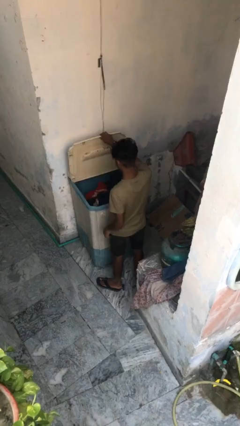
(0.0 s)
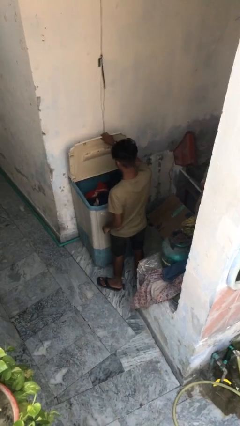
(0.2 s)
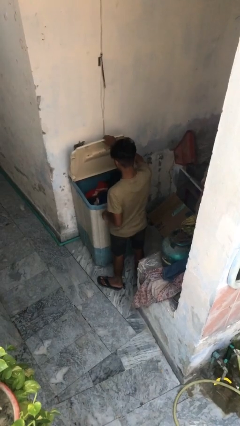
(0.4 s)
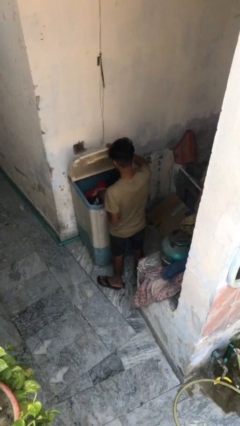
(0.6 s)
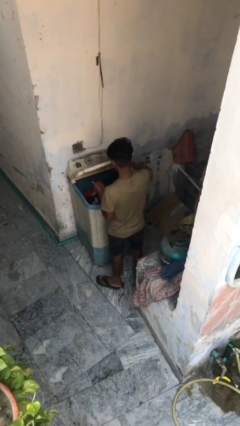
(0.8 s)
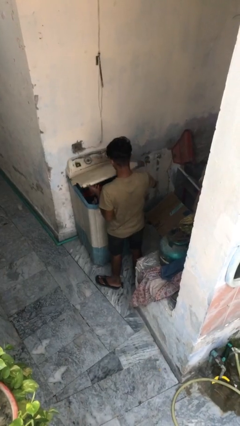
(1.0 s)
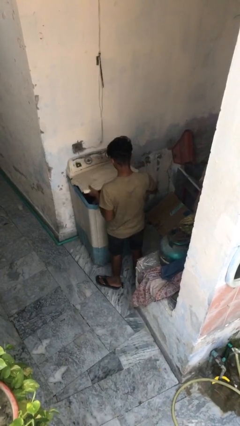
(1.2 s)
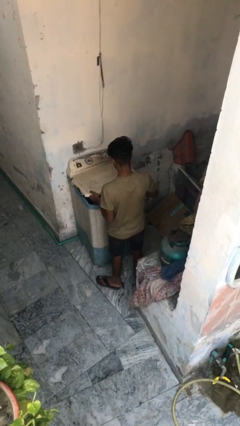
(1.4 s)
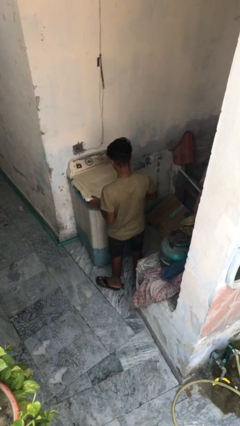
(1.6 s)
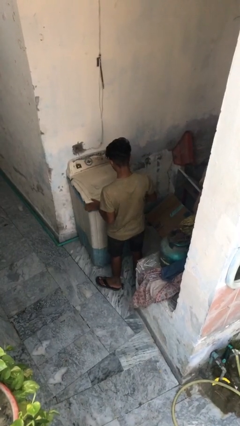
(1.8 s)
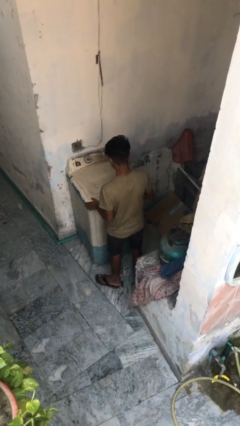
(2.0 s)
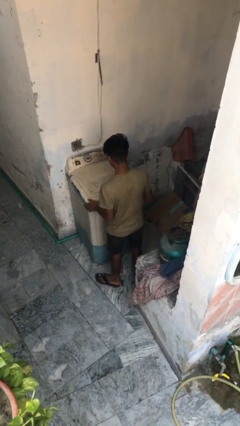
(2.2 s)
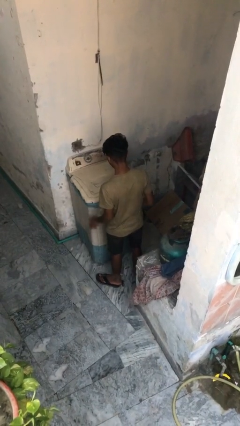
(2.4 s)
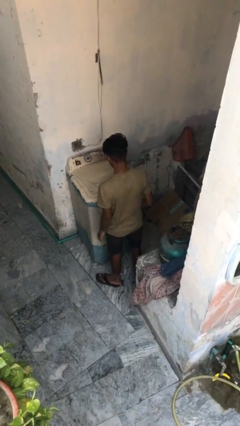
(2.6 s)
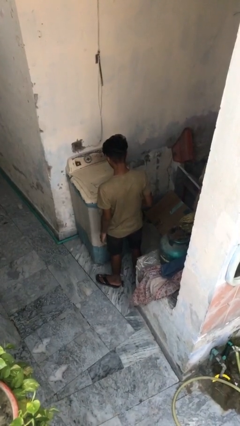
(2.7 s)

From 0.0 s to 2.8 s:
person closes clothes washer

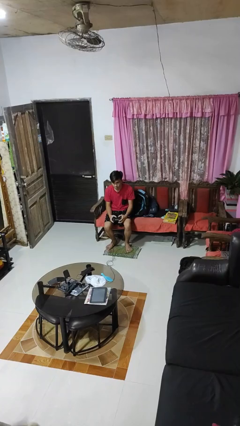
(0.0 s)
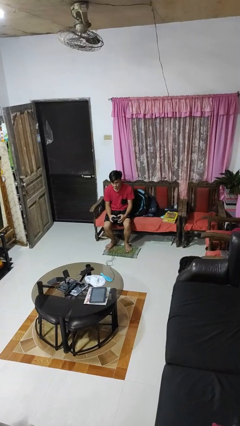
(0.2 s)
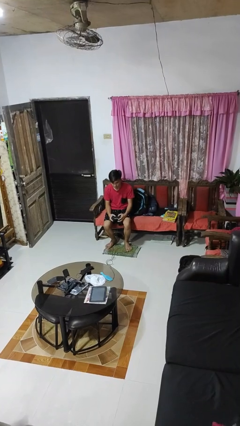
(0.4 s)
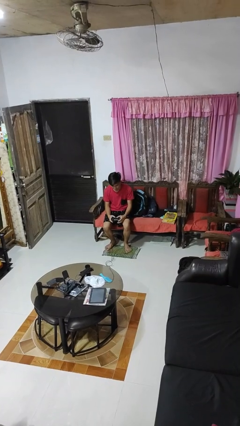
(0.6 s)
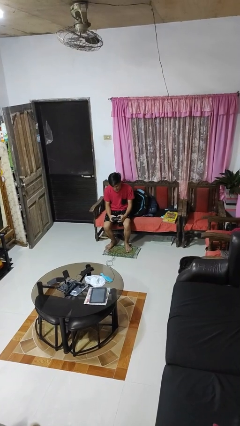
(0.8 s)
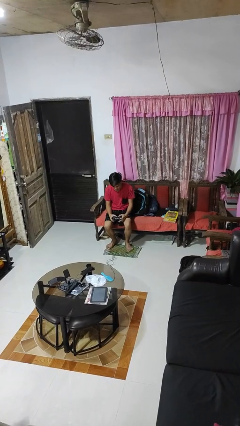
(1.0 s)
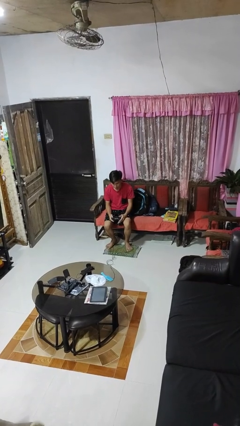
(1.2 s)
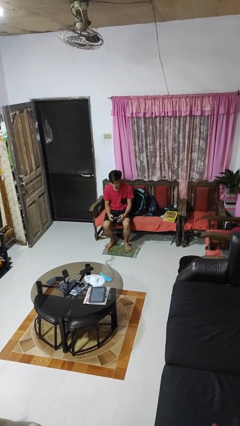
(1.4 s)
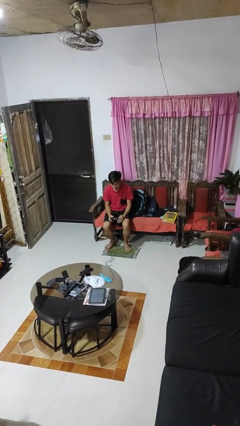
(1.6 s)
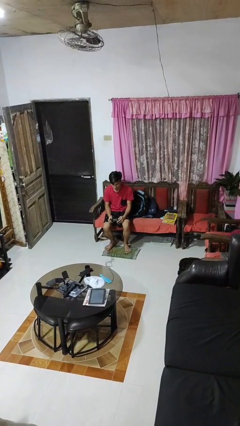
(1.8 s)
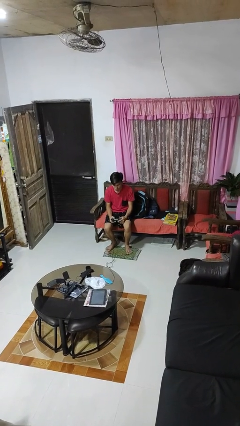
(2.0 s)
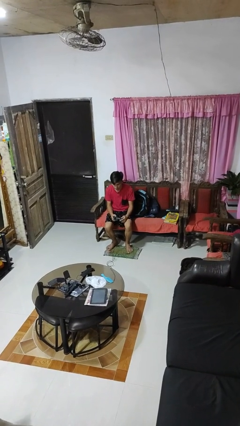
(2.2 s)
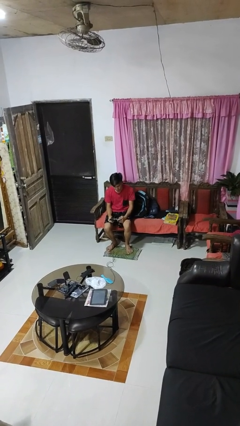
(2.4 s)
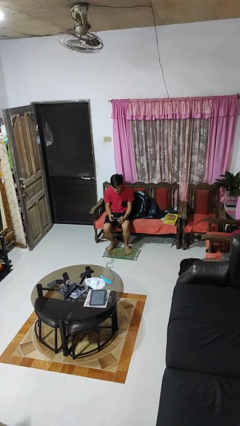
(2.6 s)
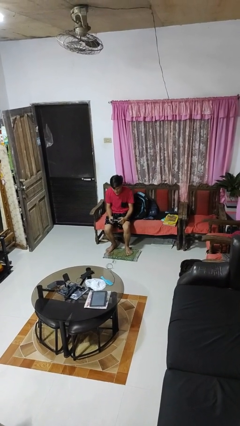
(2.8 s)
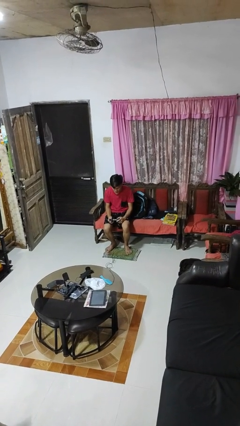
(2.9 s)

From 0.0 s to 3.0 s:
person interacts with handheld game

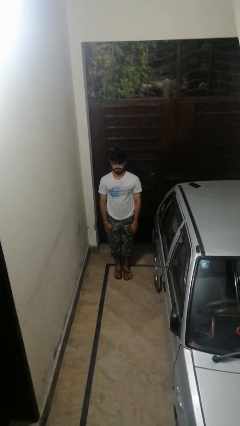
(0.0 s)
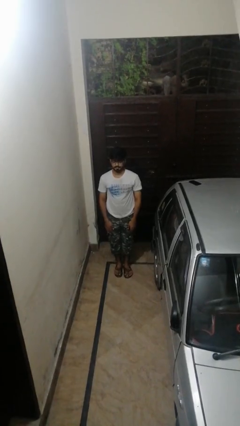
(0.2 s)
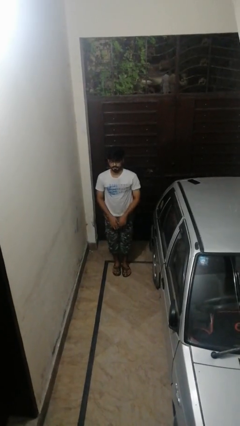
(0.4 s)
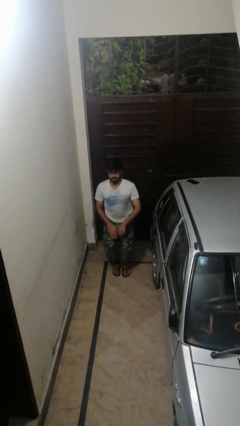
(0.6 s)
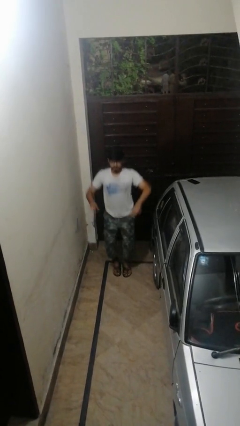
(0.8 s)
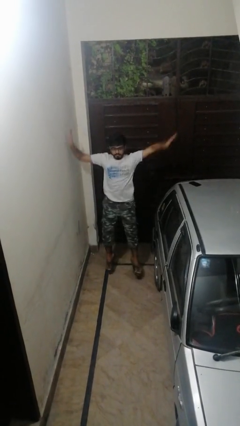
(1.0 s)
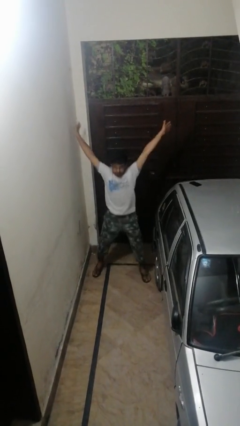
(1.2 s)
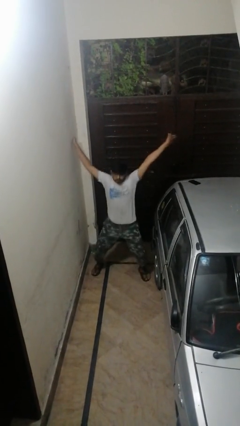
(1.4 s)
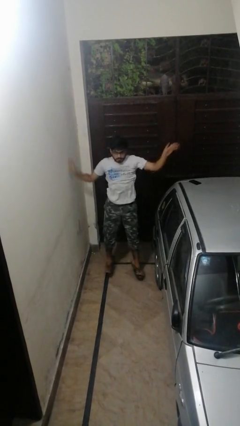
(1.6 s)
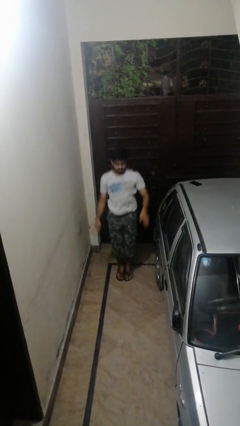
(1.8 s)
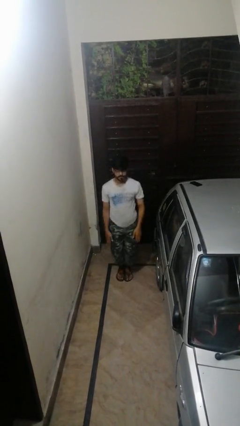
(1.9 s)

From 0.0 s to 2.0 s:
person exercises with jumping jacks

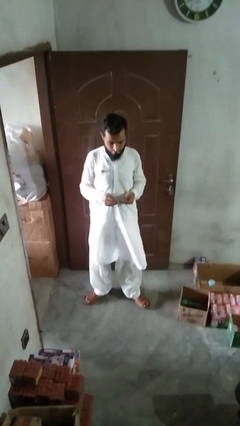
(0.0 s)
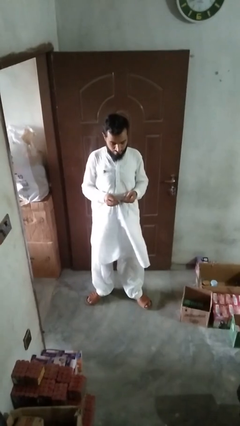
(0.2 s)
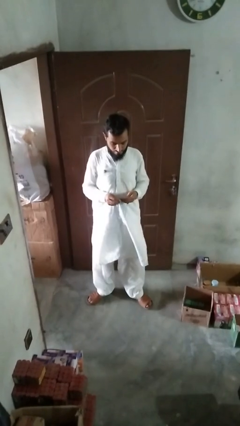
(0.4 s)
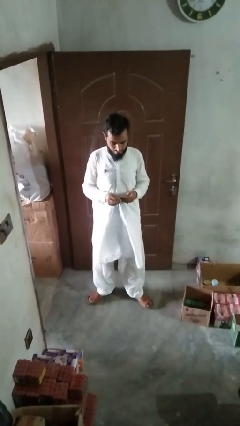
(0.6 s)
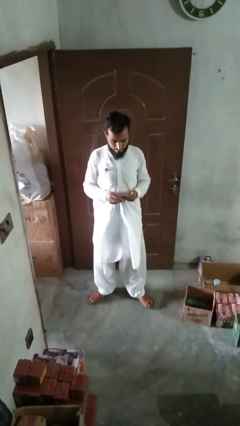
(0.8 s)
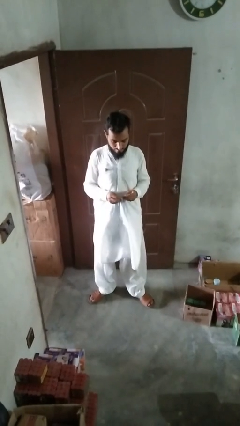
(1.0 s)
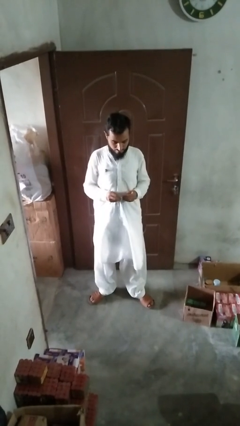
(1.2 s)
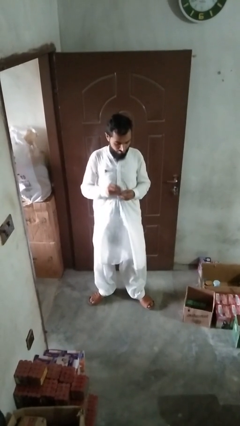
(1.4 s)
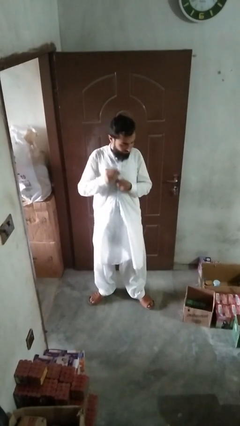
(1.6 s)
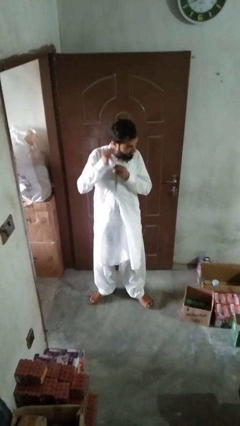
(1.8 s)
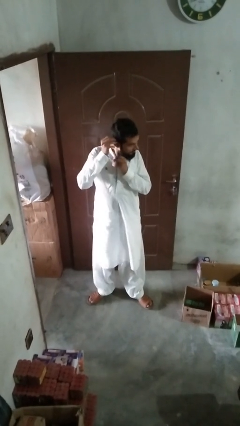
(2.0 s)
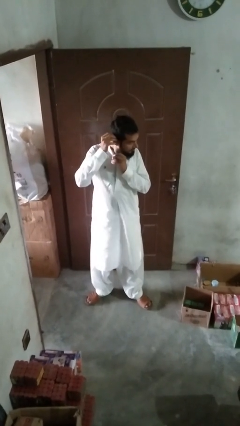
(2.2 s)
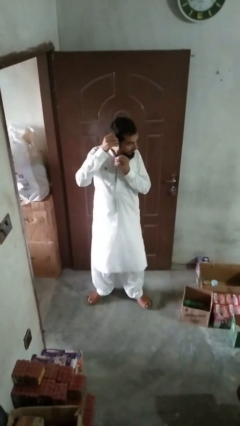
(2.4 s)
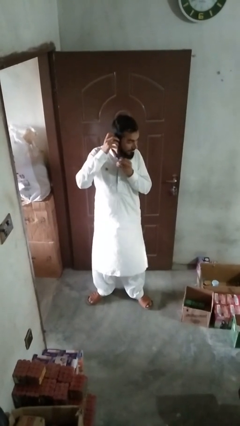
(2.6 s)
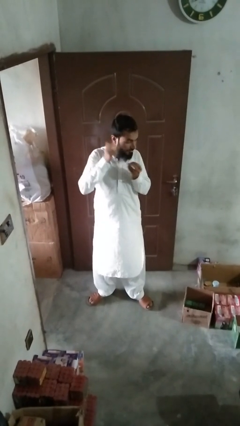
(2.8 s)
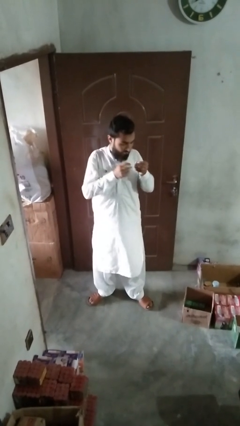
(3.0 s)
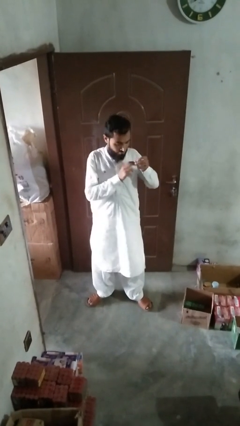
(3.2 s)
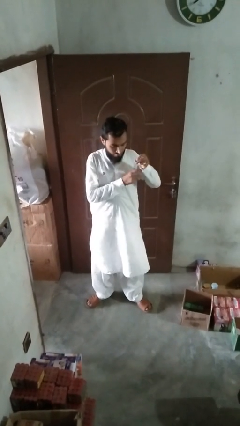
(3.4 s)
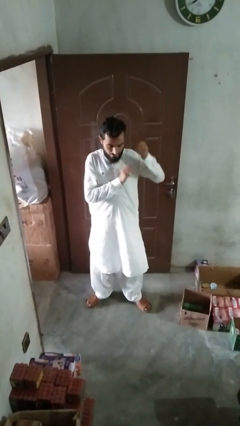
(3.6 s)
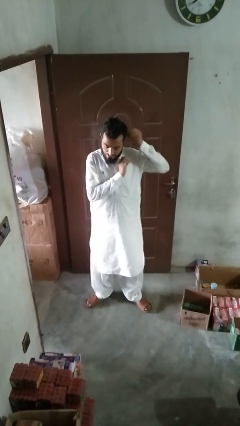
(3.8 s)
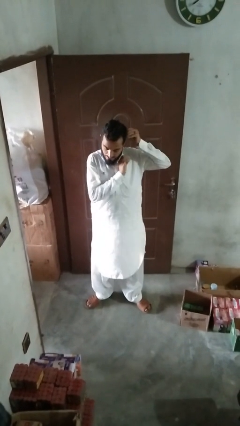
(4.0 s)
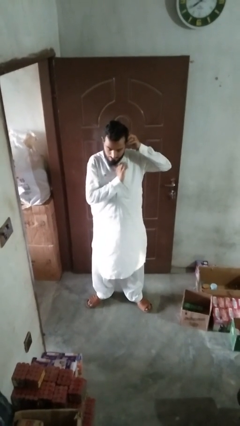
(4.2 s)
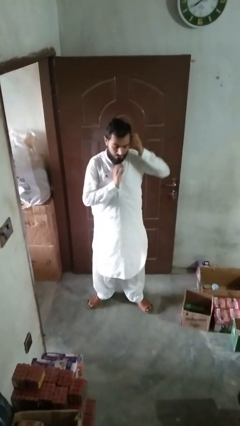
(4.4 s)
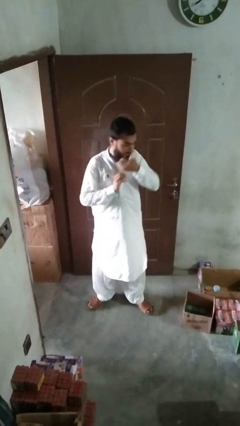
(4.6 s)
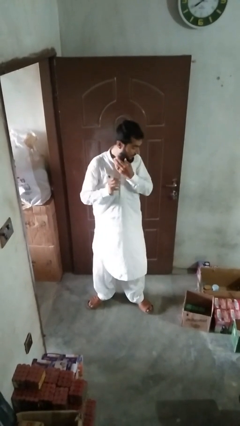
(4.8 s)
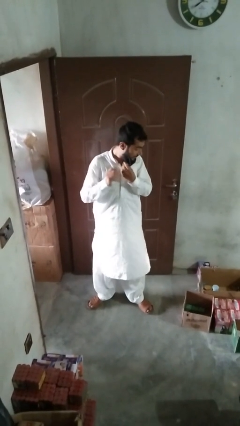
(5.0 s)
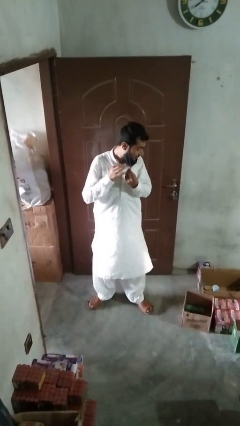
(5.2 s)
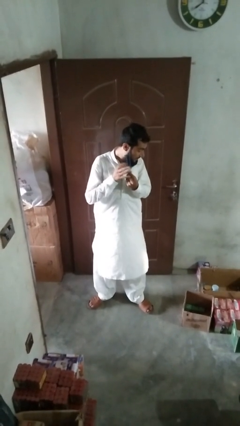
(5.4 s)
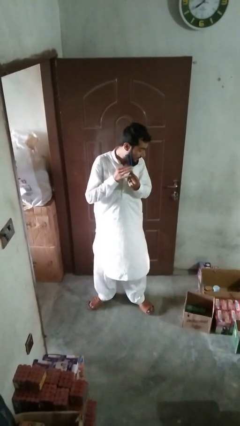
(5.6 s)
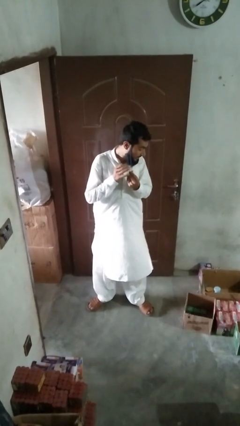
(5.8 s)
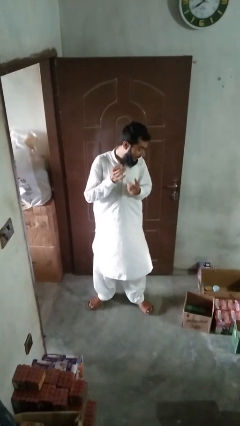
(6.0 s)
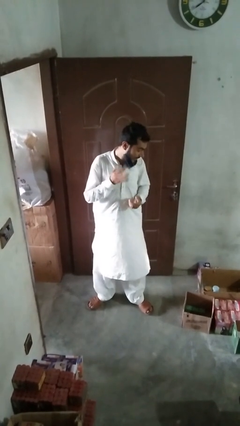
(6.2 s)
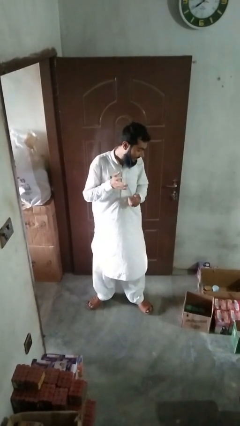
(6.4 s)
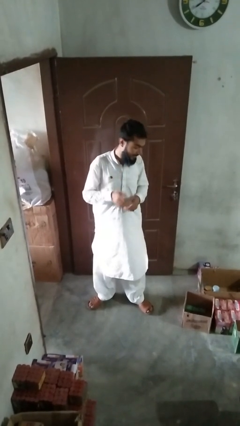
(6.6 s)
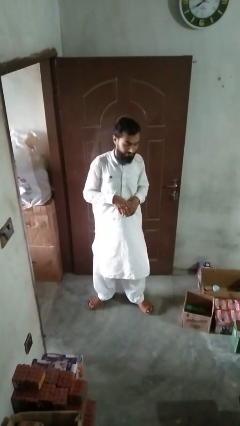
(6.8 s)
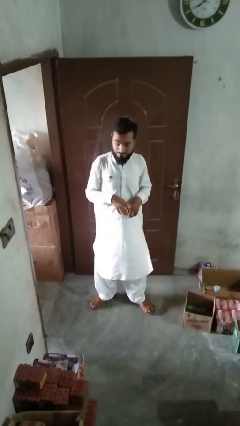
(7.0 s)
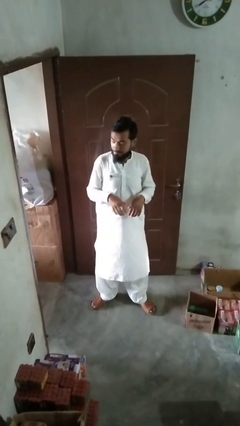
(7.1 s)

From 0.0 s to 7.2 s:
person puts on earrings

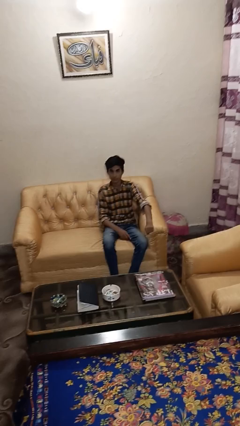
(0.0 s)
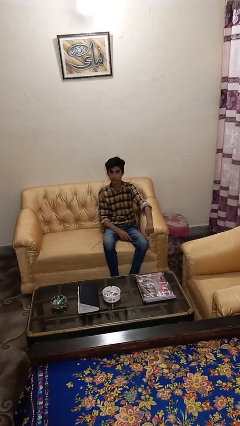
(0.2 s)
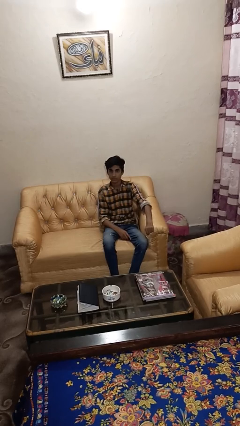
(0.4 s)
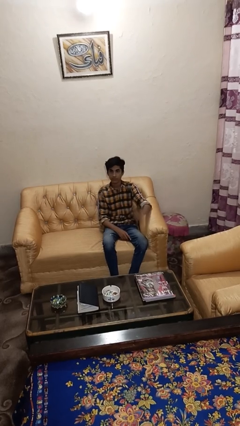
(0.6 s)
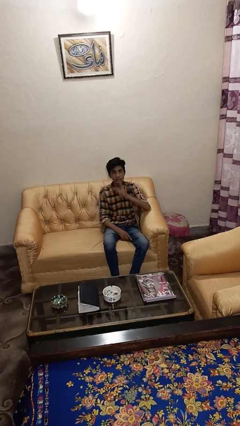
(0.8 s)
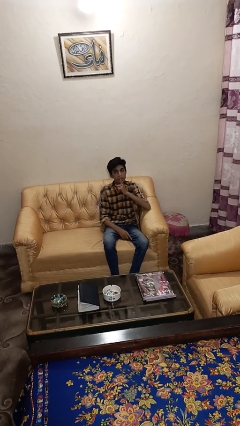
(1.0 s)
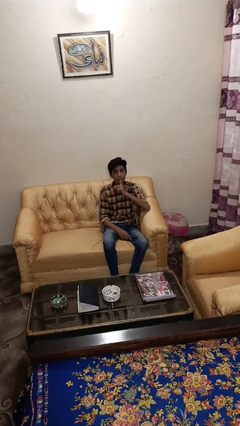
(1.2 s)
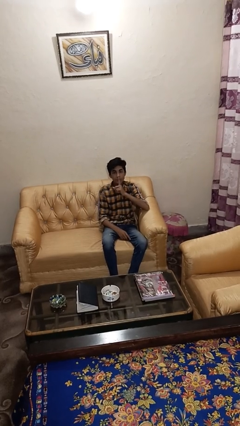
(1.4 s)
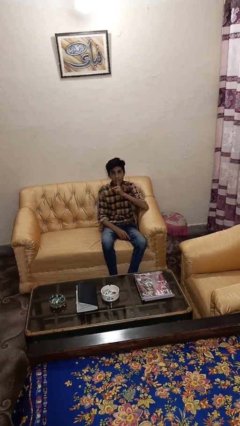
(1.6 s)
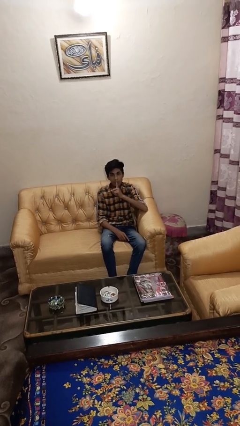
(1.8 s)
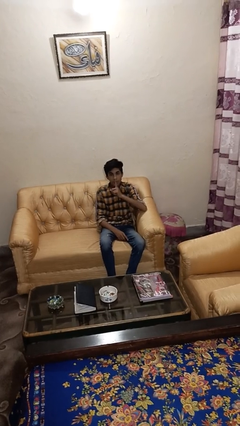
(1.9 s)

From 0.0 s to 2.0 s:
person gestures be quiet

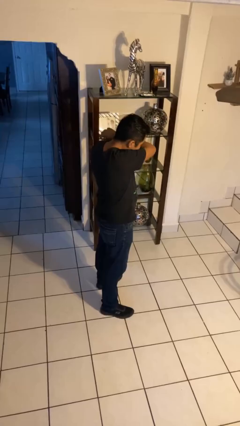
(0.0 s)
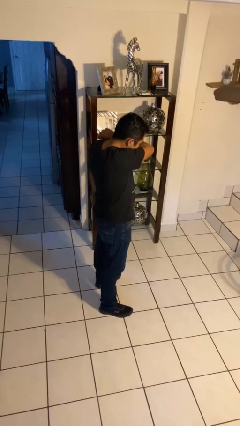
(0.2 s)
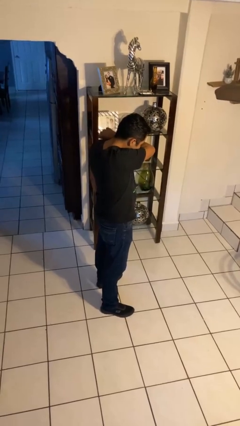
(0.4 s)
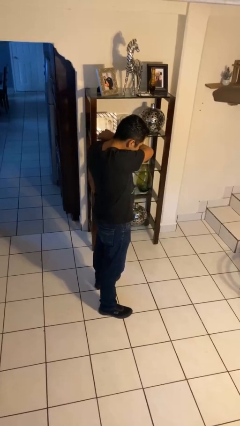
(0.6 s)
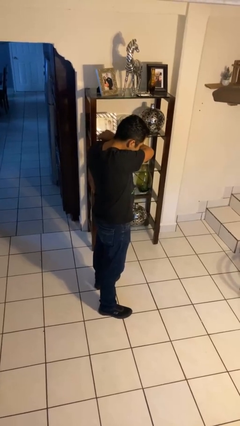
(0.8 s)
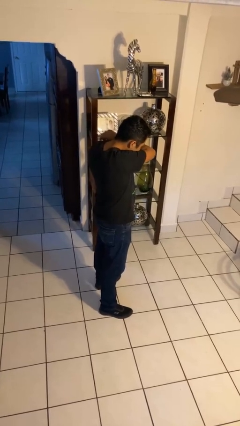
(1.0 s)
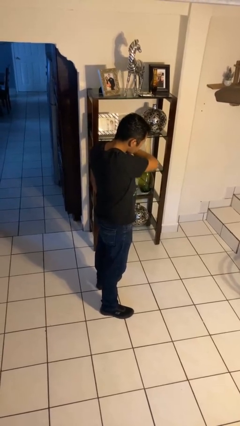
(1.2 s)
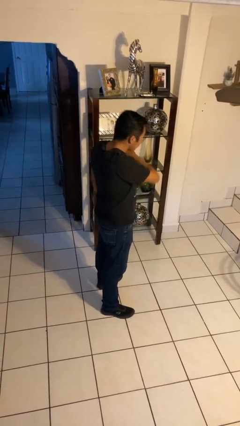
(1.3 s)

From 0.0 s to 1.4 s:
person sneezes into arm
